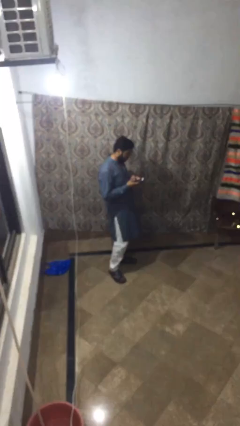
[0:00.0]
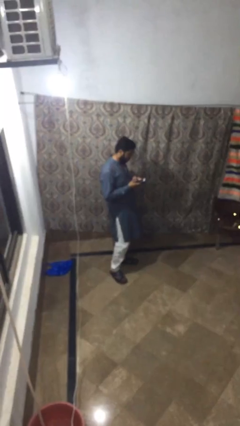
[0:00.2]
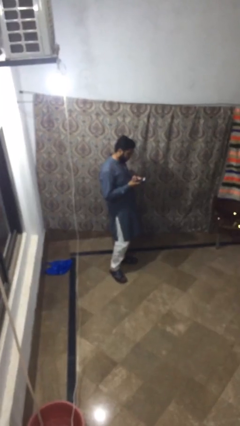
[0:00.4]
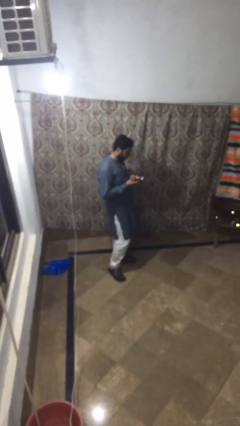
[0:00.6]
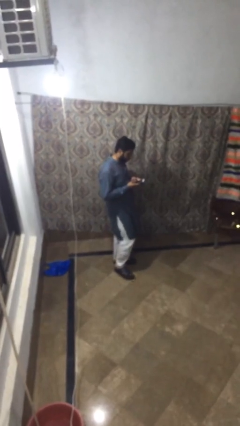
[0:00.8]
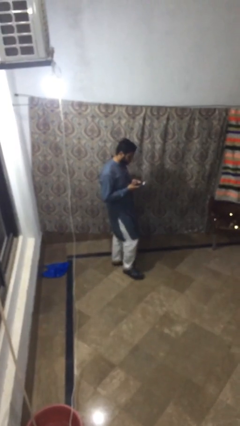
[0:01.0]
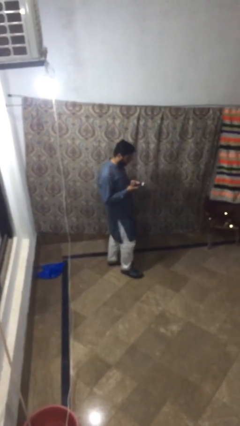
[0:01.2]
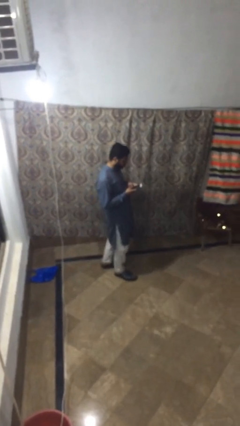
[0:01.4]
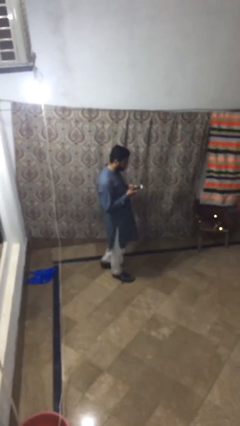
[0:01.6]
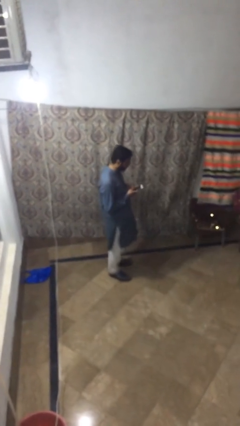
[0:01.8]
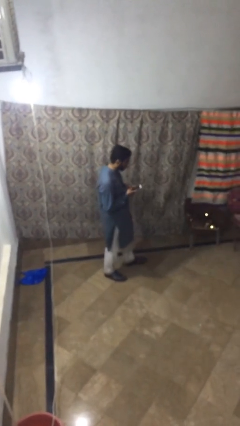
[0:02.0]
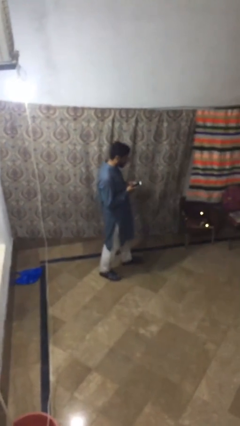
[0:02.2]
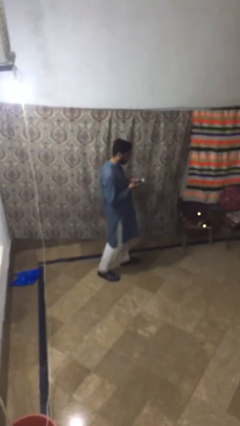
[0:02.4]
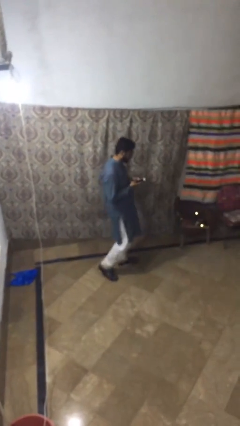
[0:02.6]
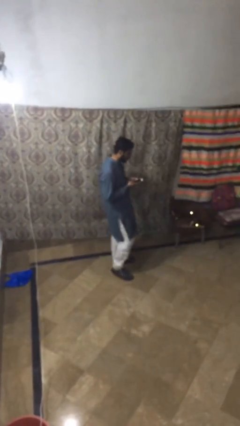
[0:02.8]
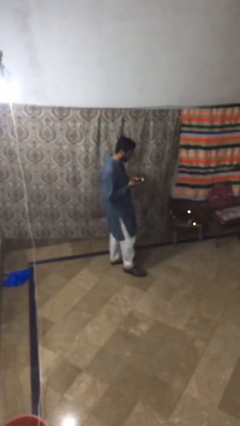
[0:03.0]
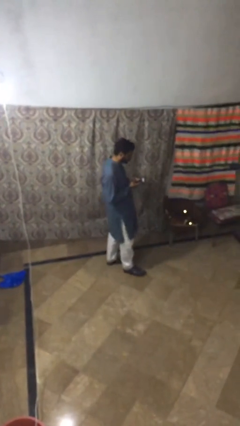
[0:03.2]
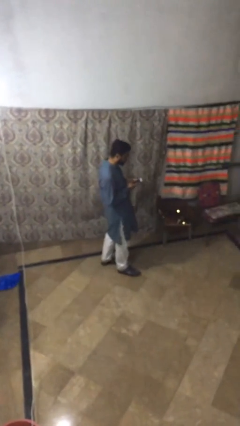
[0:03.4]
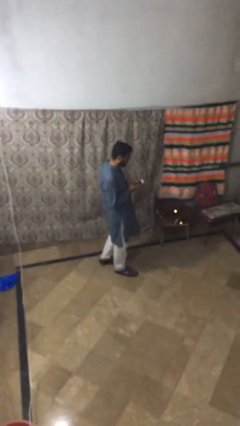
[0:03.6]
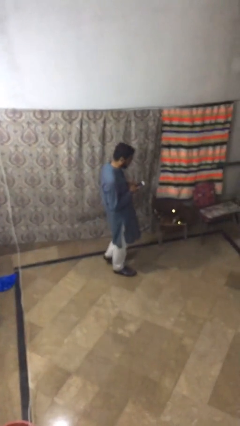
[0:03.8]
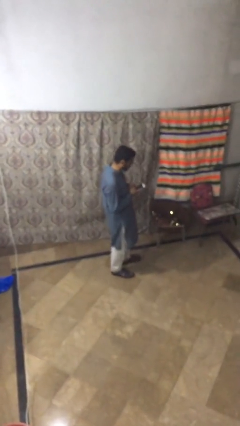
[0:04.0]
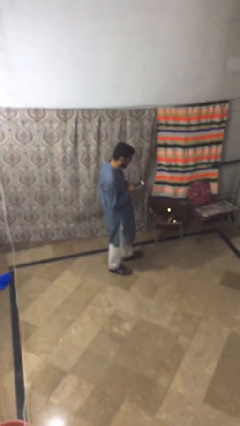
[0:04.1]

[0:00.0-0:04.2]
person texts on phone

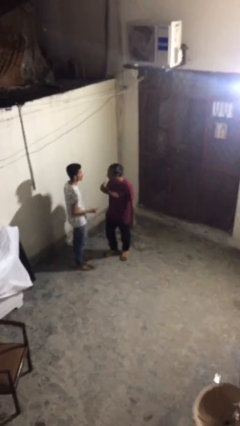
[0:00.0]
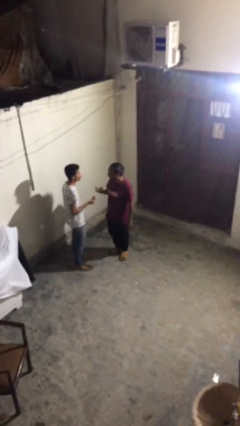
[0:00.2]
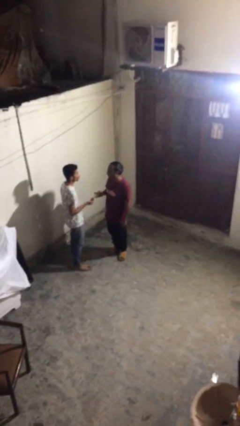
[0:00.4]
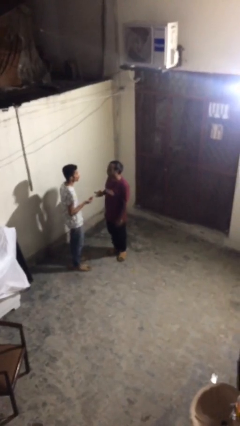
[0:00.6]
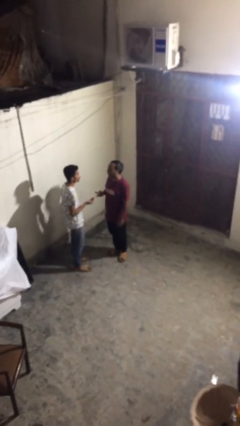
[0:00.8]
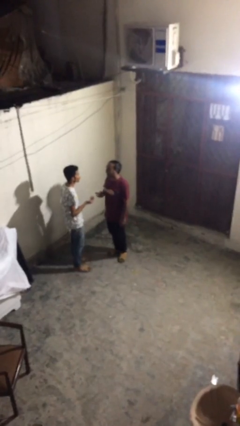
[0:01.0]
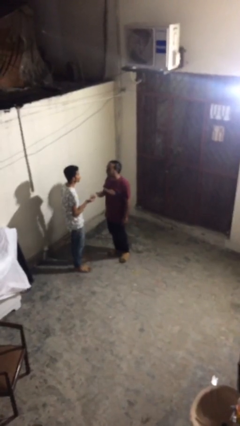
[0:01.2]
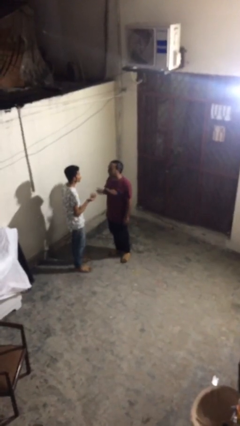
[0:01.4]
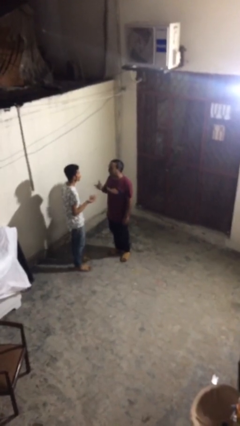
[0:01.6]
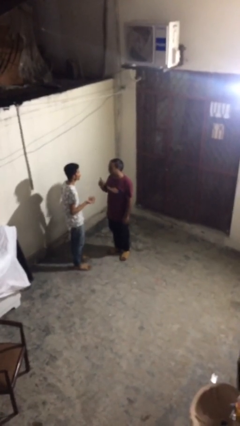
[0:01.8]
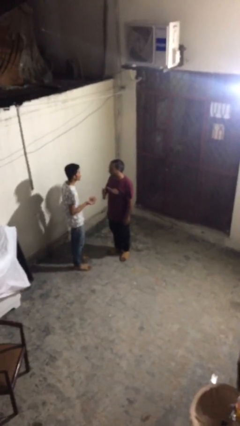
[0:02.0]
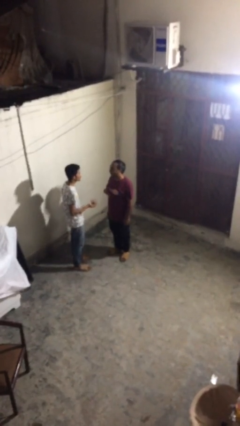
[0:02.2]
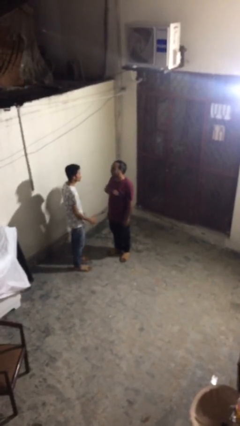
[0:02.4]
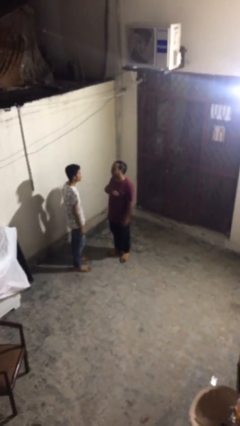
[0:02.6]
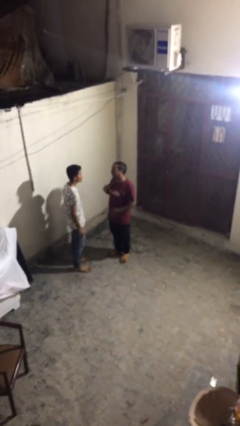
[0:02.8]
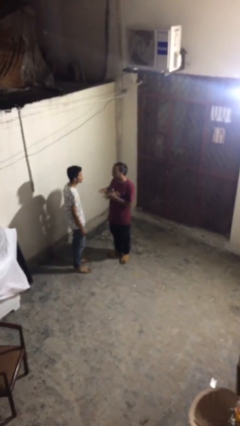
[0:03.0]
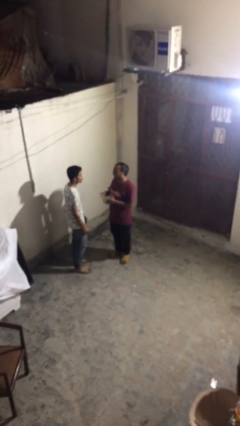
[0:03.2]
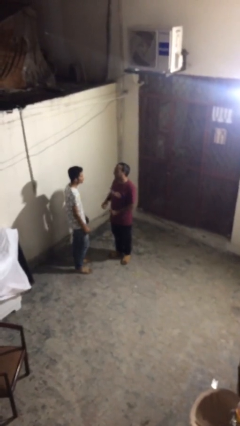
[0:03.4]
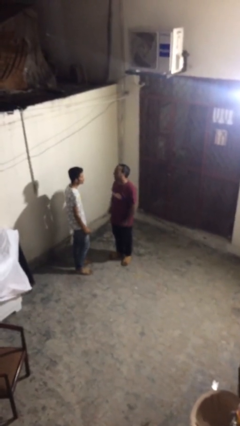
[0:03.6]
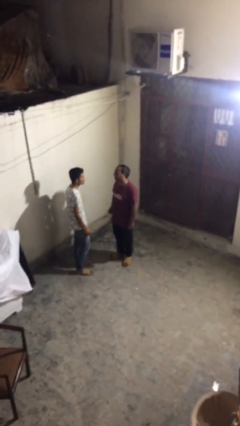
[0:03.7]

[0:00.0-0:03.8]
person talks to person

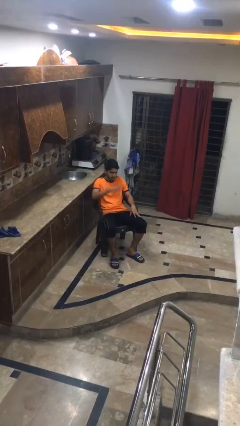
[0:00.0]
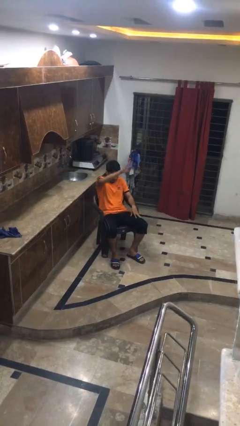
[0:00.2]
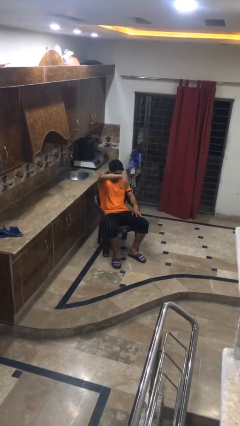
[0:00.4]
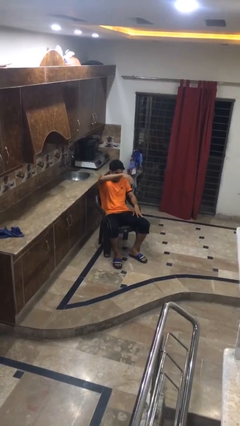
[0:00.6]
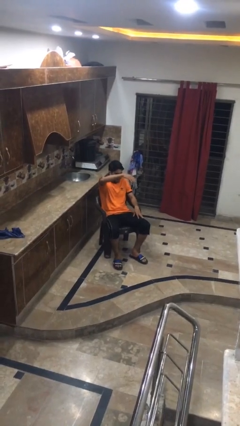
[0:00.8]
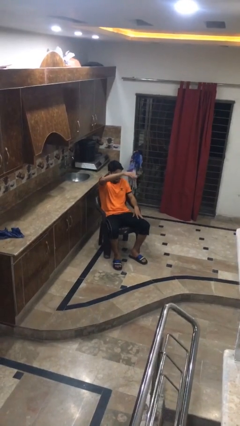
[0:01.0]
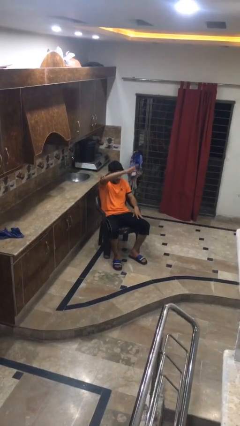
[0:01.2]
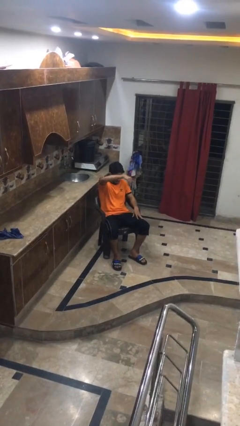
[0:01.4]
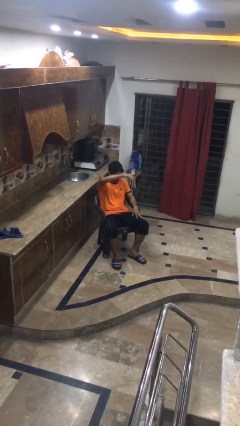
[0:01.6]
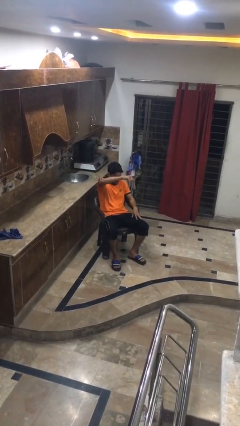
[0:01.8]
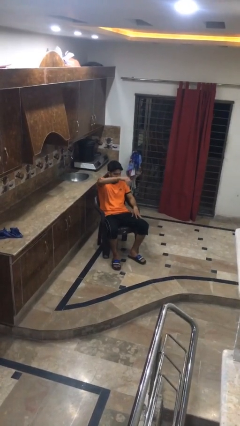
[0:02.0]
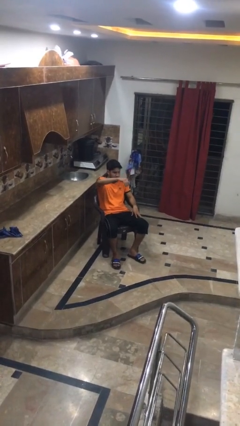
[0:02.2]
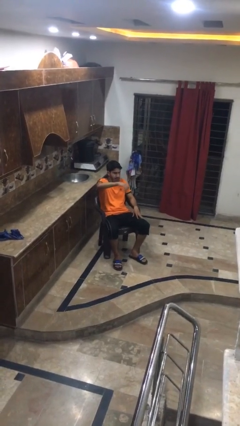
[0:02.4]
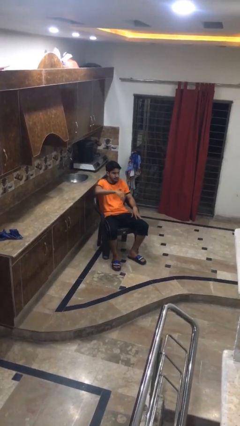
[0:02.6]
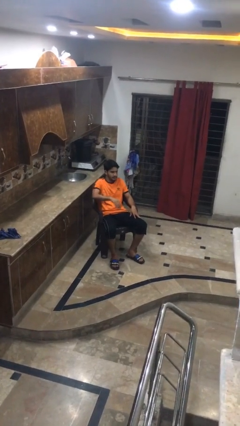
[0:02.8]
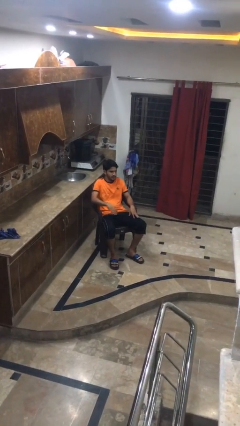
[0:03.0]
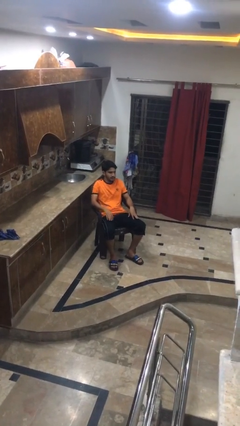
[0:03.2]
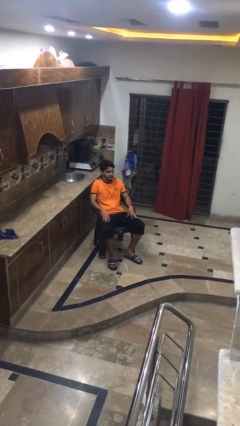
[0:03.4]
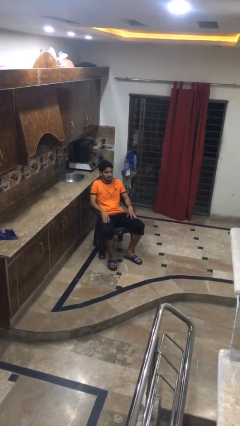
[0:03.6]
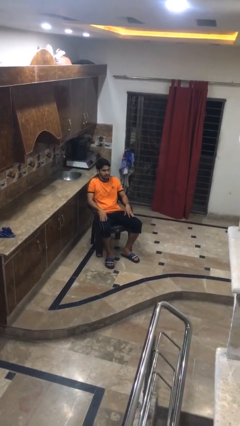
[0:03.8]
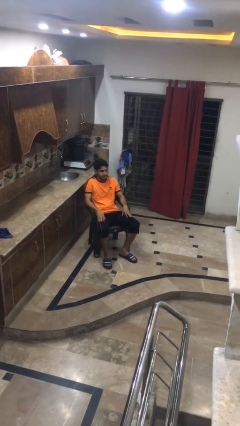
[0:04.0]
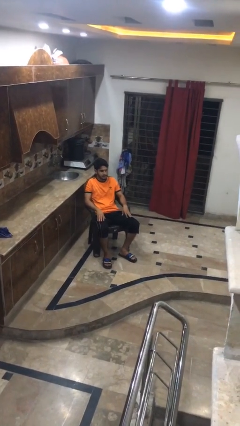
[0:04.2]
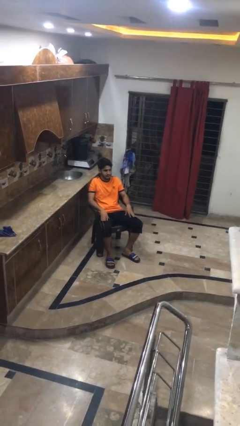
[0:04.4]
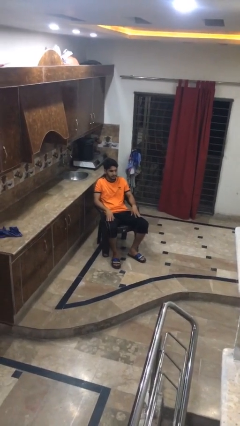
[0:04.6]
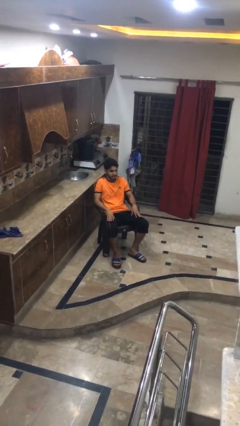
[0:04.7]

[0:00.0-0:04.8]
person gestures come here

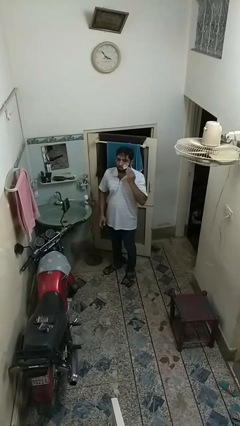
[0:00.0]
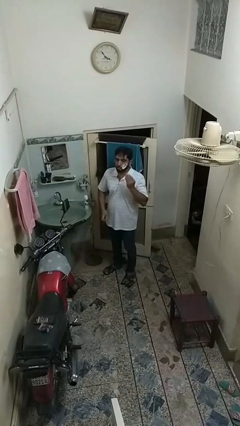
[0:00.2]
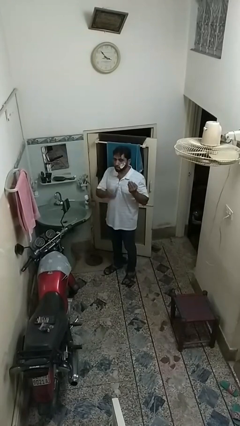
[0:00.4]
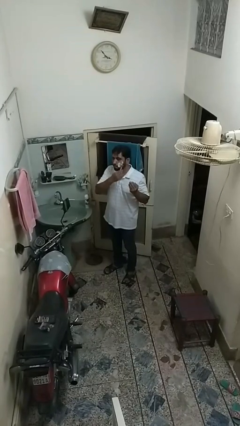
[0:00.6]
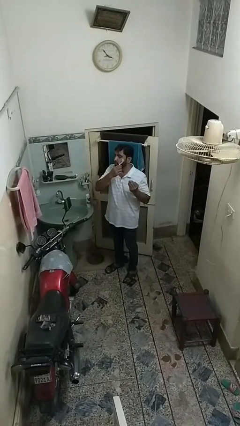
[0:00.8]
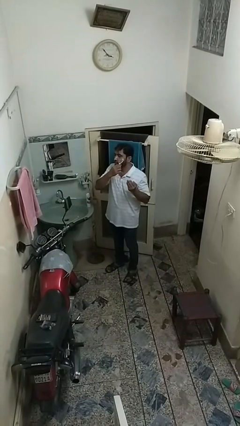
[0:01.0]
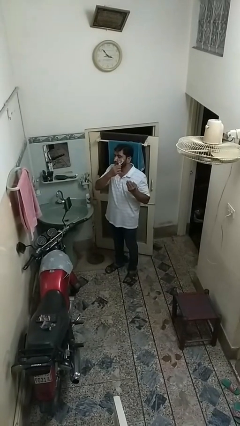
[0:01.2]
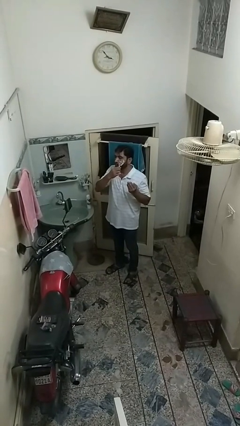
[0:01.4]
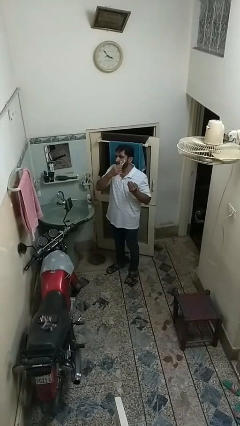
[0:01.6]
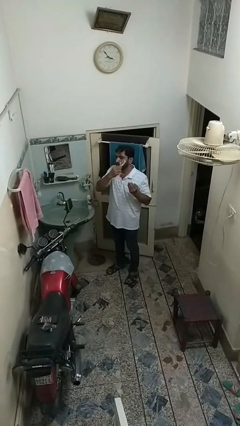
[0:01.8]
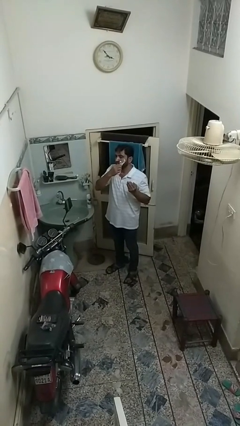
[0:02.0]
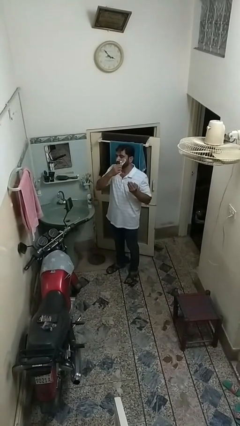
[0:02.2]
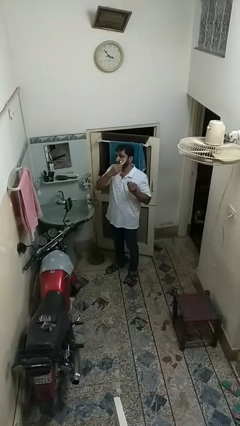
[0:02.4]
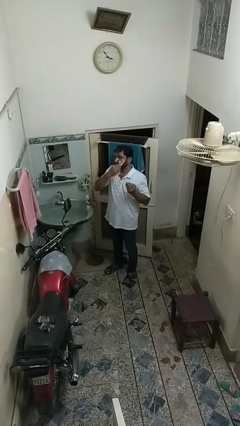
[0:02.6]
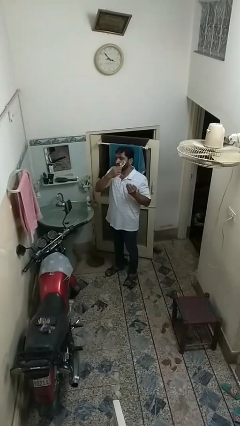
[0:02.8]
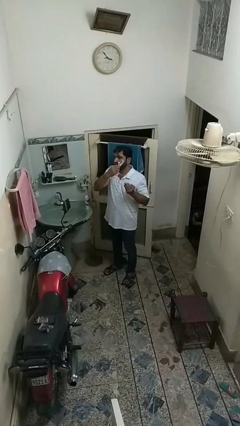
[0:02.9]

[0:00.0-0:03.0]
person shaves face

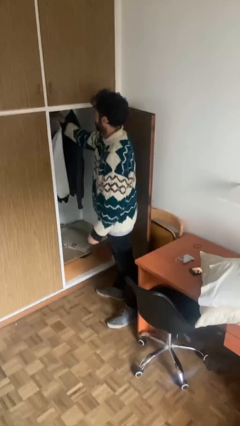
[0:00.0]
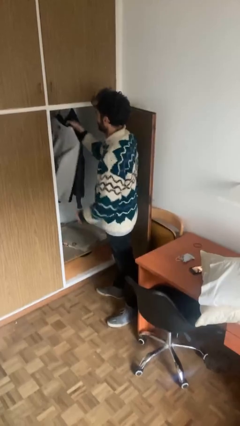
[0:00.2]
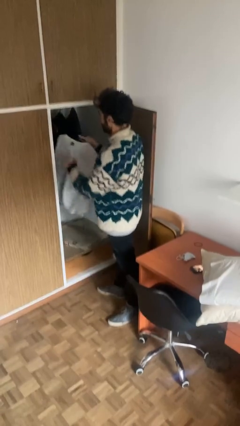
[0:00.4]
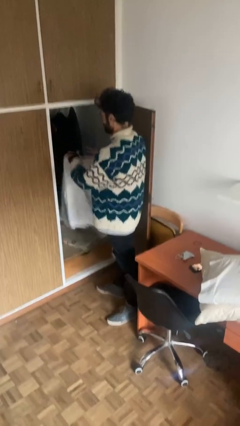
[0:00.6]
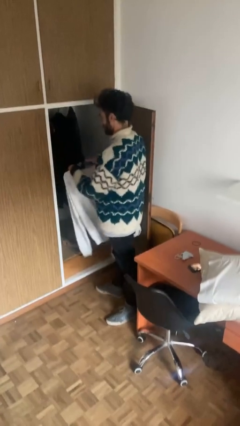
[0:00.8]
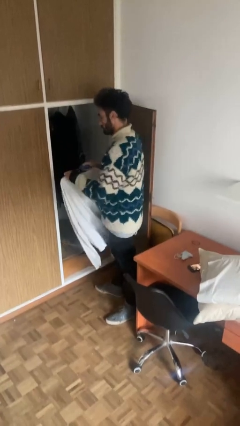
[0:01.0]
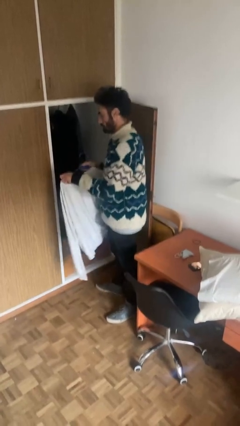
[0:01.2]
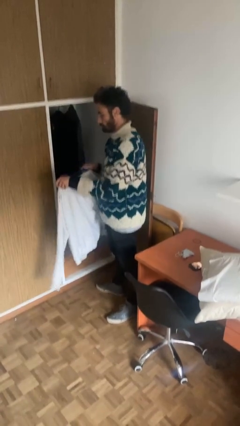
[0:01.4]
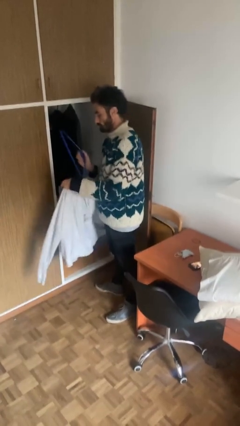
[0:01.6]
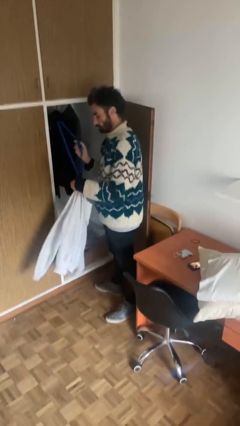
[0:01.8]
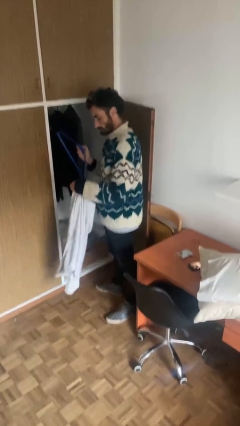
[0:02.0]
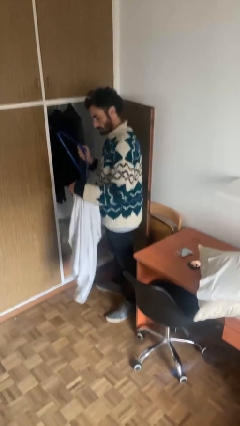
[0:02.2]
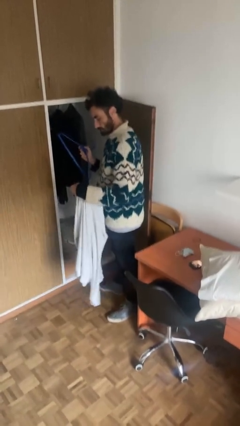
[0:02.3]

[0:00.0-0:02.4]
person takes clothes from closet
